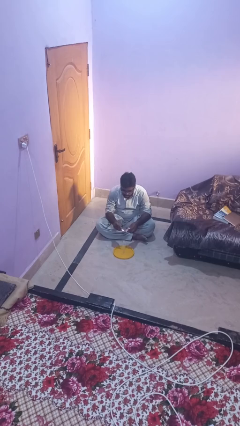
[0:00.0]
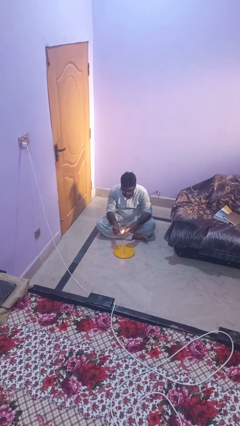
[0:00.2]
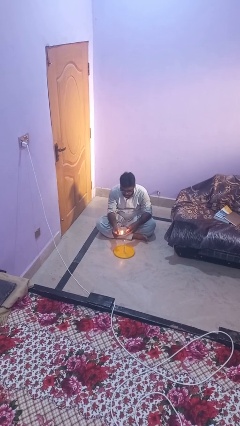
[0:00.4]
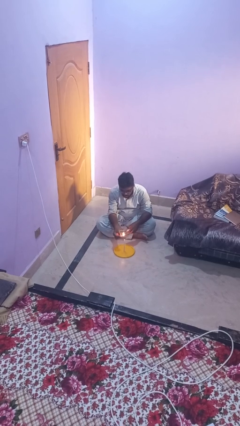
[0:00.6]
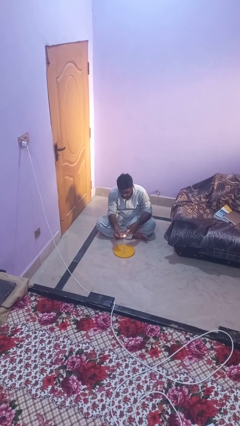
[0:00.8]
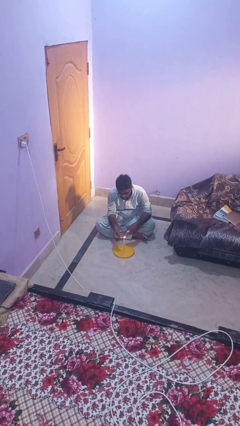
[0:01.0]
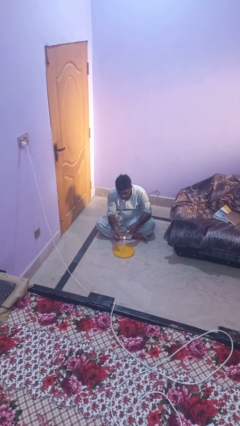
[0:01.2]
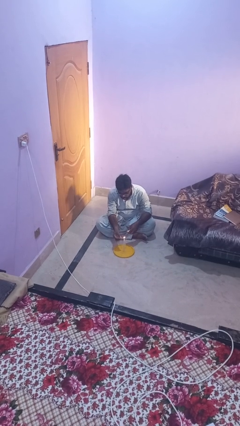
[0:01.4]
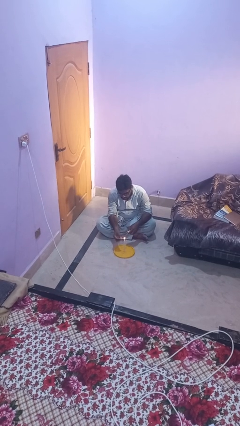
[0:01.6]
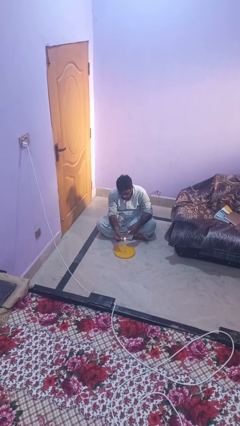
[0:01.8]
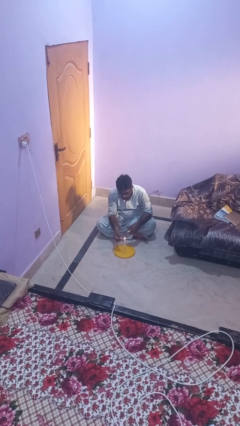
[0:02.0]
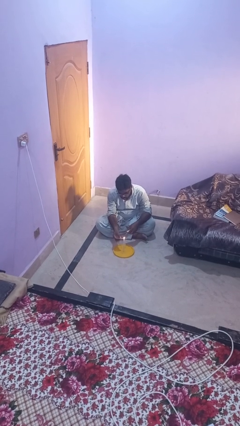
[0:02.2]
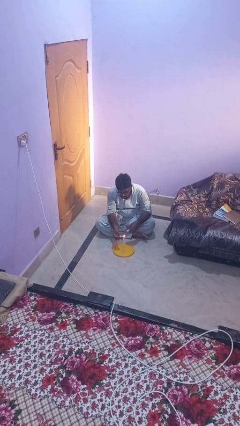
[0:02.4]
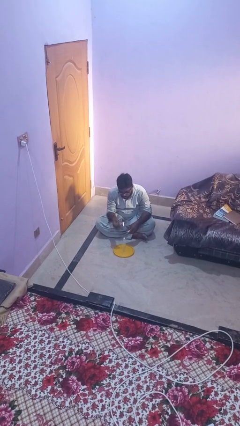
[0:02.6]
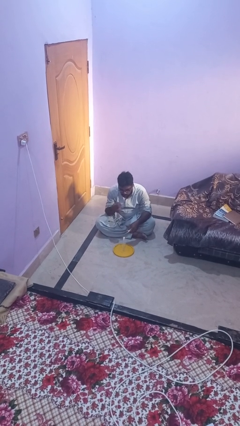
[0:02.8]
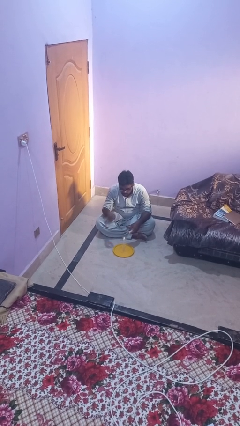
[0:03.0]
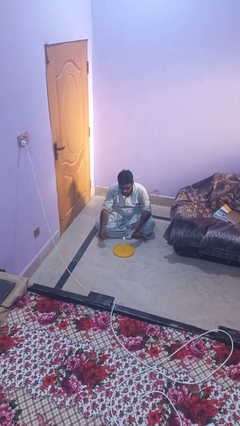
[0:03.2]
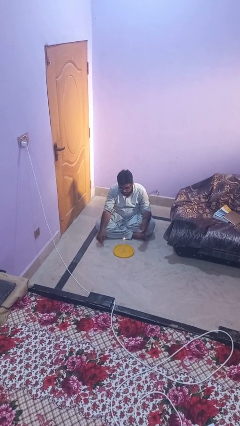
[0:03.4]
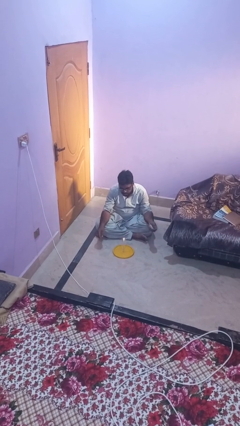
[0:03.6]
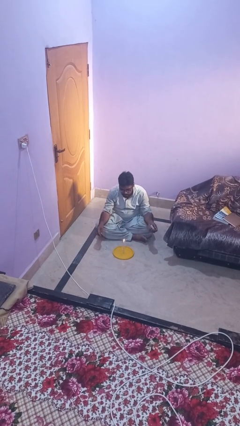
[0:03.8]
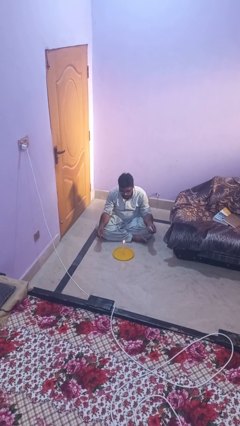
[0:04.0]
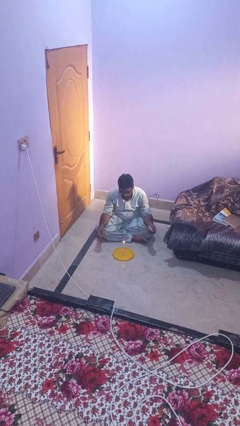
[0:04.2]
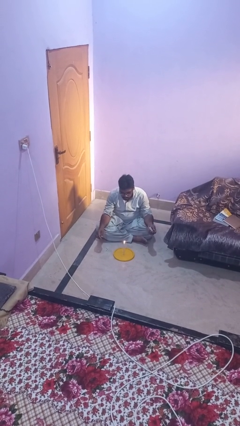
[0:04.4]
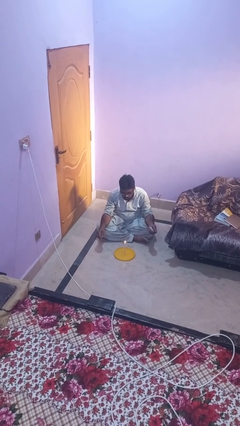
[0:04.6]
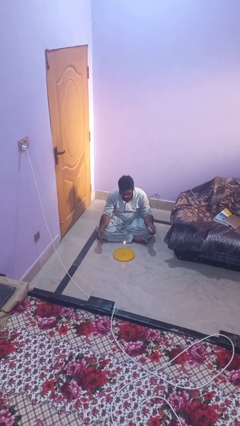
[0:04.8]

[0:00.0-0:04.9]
person lights candle

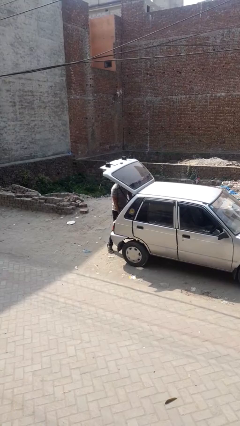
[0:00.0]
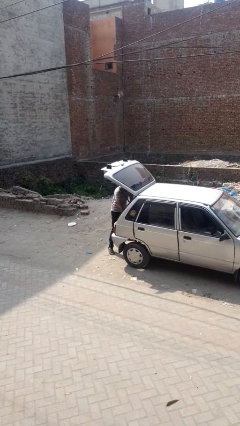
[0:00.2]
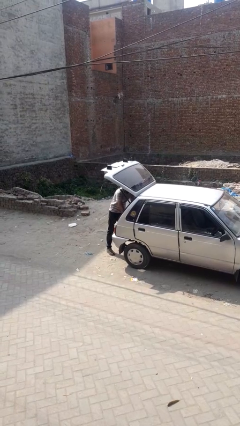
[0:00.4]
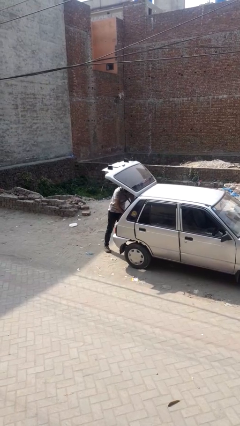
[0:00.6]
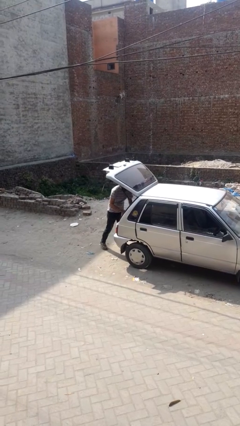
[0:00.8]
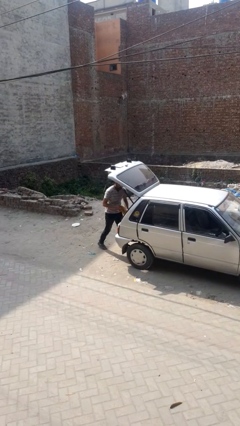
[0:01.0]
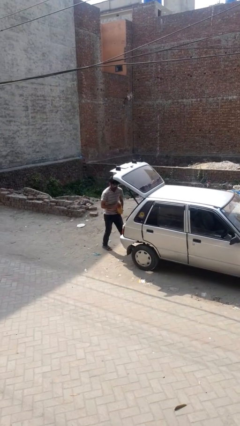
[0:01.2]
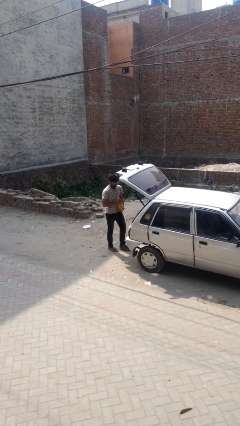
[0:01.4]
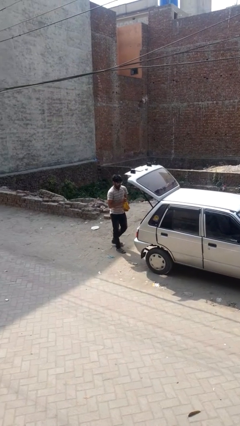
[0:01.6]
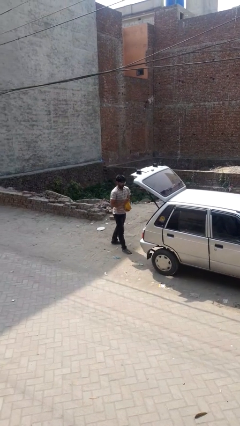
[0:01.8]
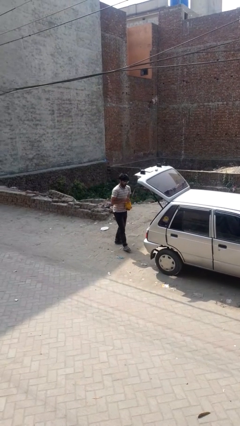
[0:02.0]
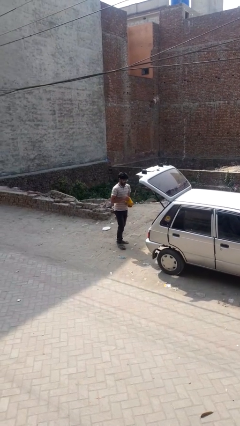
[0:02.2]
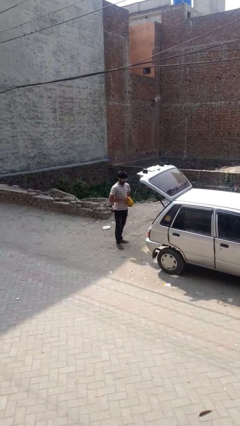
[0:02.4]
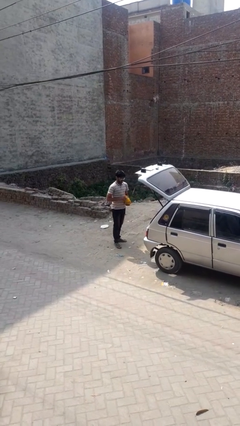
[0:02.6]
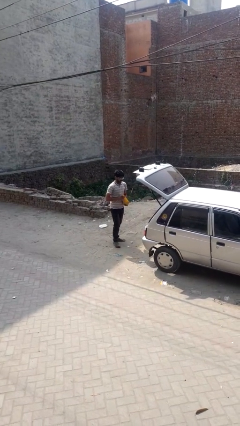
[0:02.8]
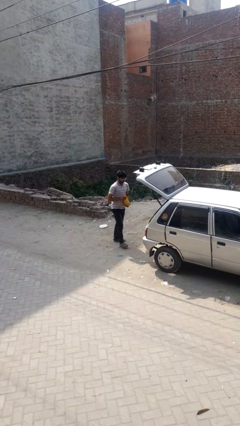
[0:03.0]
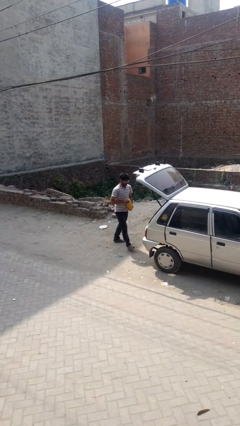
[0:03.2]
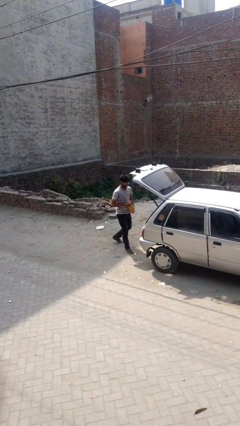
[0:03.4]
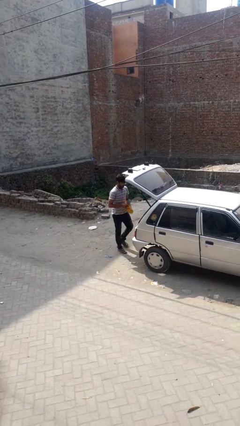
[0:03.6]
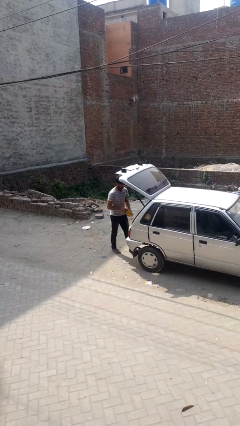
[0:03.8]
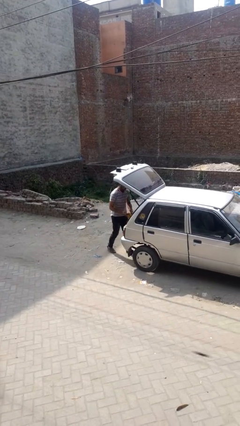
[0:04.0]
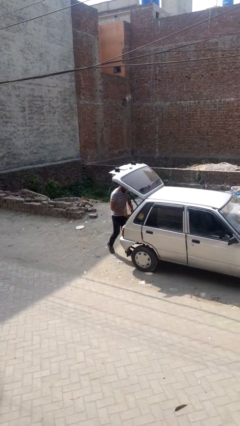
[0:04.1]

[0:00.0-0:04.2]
person unloads car

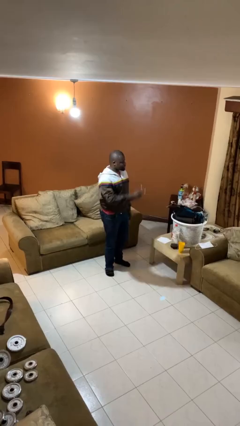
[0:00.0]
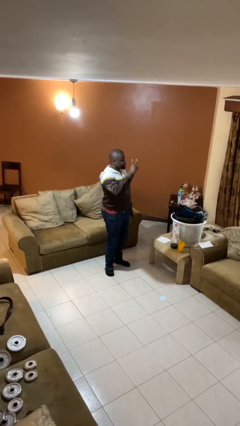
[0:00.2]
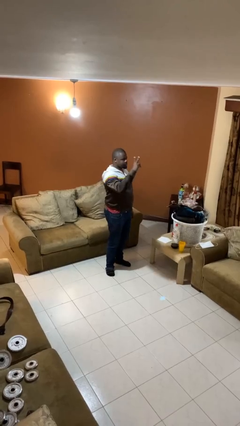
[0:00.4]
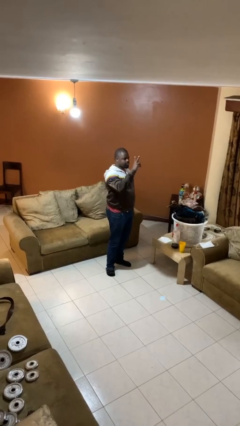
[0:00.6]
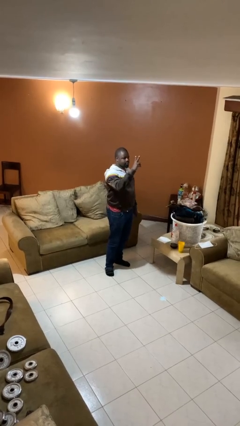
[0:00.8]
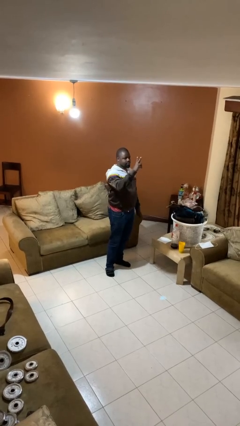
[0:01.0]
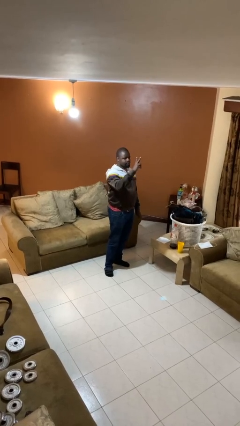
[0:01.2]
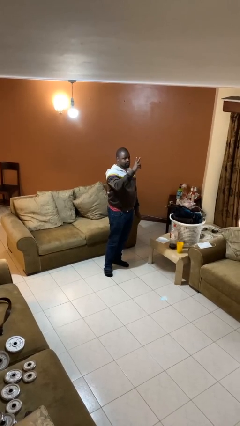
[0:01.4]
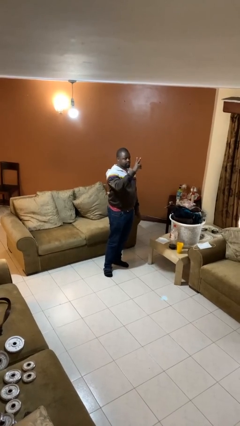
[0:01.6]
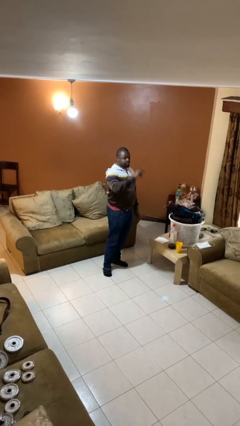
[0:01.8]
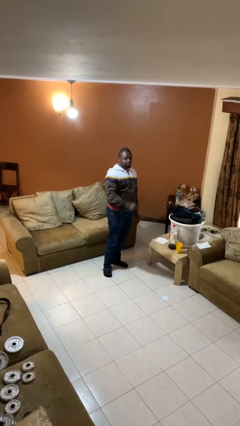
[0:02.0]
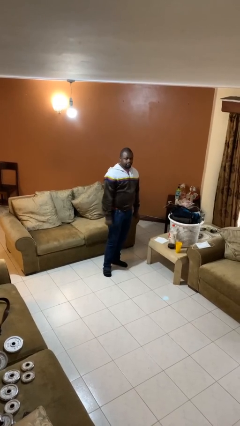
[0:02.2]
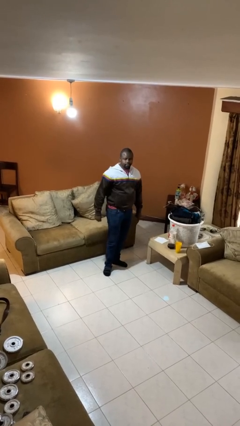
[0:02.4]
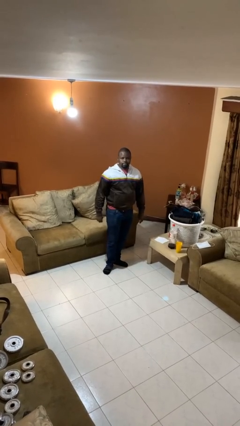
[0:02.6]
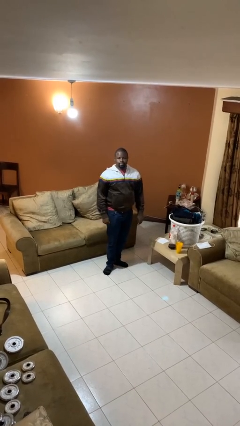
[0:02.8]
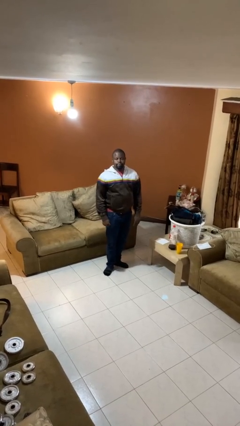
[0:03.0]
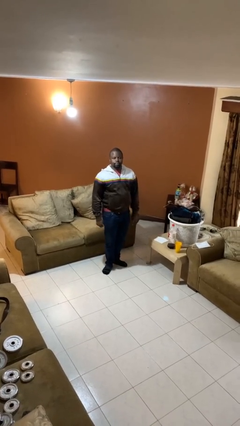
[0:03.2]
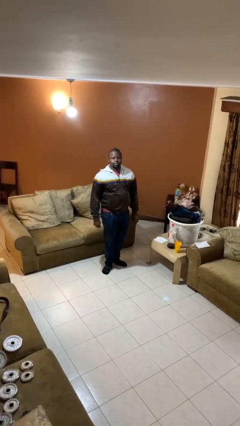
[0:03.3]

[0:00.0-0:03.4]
person gestures peace

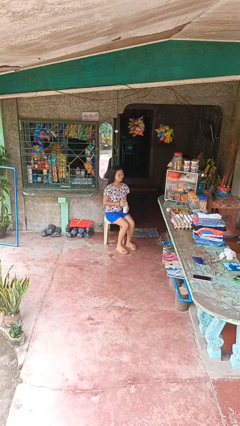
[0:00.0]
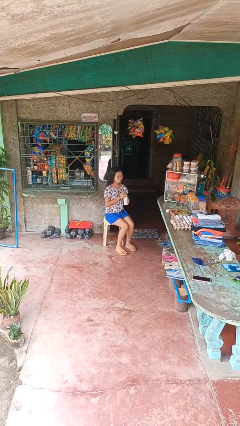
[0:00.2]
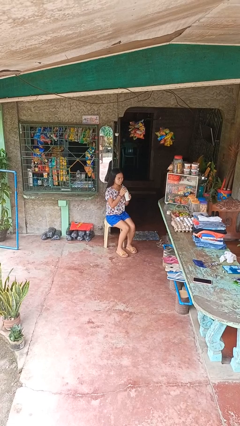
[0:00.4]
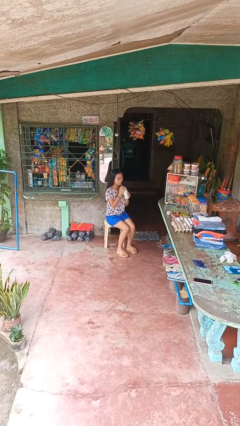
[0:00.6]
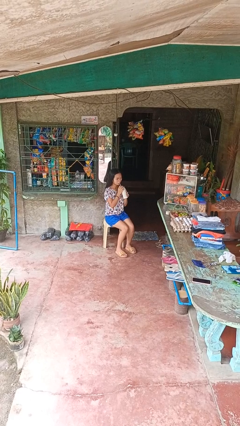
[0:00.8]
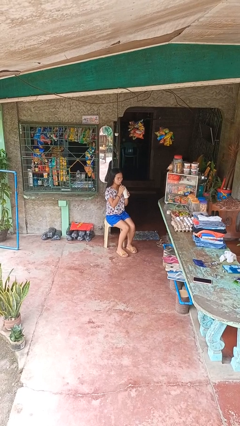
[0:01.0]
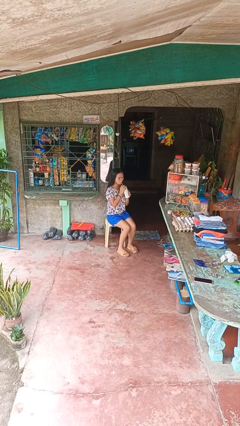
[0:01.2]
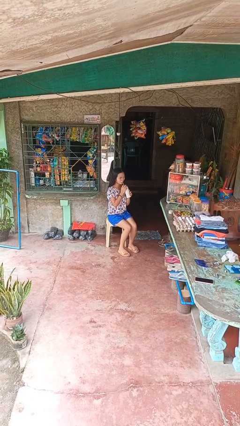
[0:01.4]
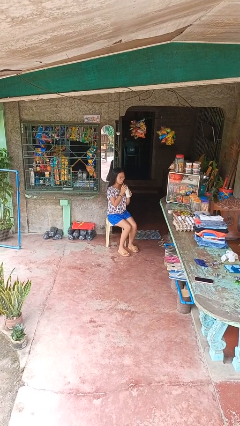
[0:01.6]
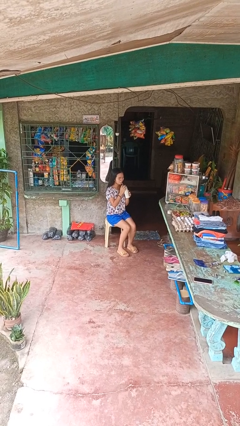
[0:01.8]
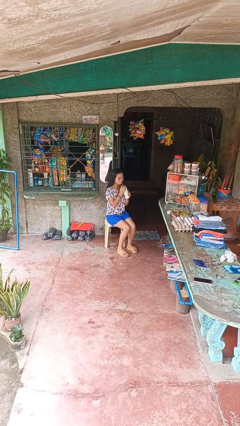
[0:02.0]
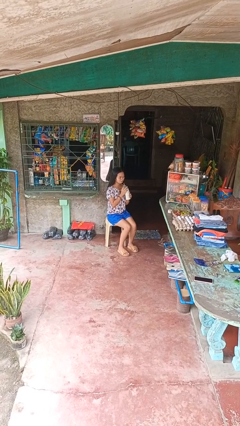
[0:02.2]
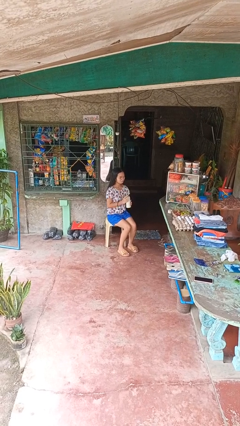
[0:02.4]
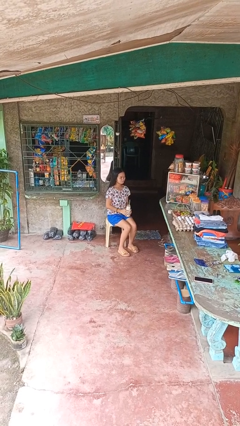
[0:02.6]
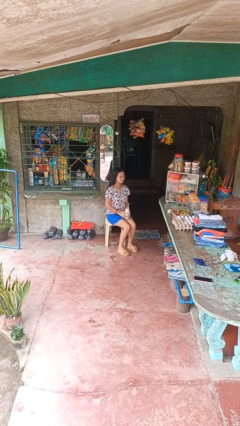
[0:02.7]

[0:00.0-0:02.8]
person drinks from straw

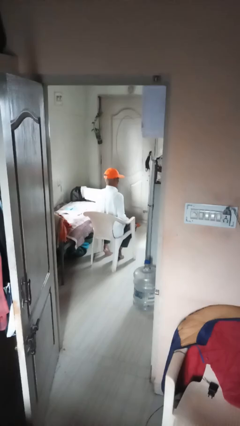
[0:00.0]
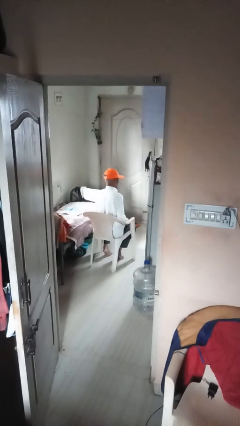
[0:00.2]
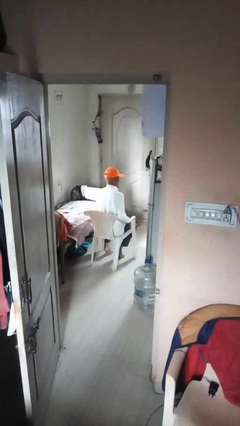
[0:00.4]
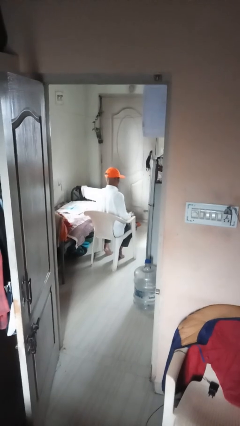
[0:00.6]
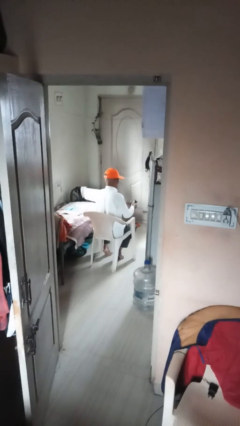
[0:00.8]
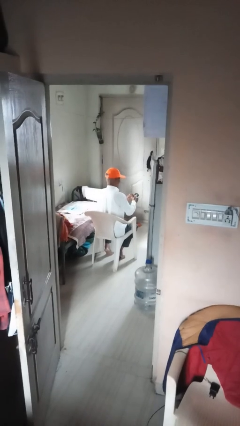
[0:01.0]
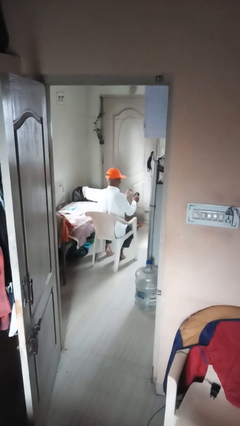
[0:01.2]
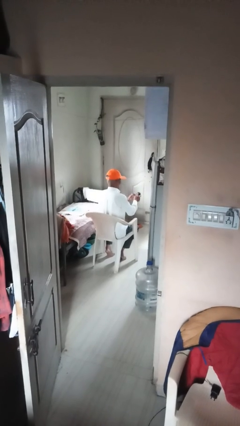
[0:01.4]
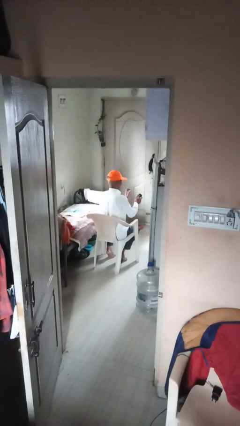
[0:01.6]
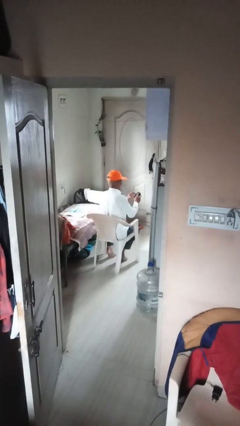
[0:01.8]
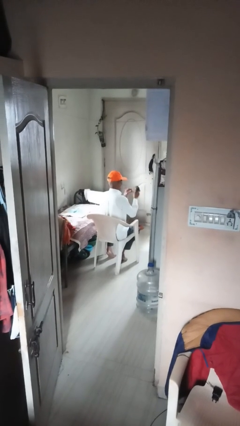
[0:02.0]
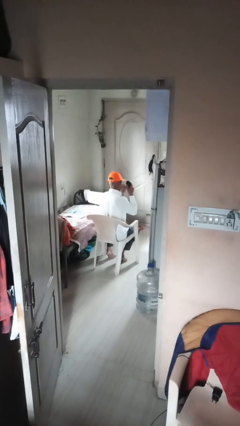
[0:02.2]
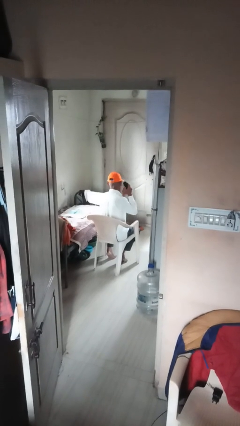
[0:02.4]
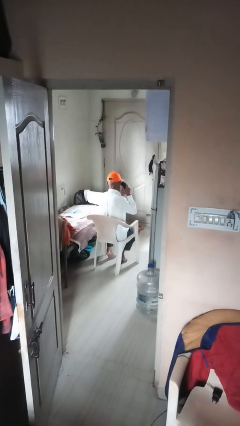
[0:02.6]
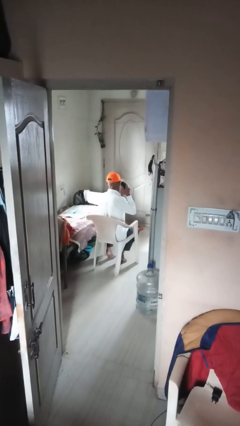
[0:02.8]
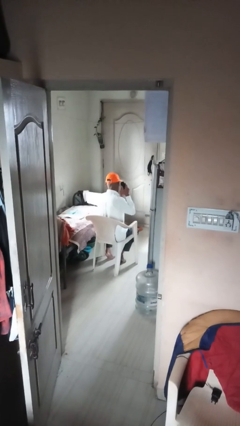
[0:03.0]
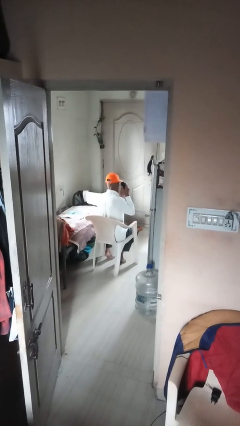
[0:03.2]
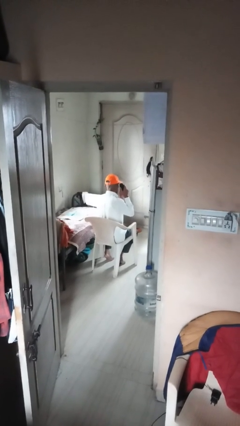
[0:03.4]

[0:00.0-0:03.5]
person taps object with finger
